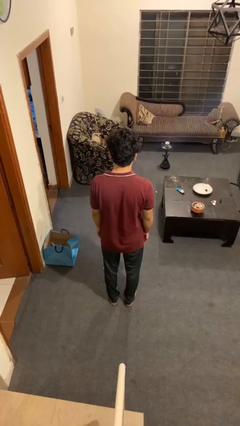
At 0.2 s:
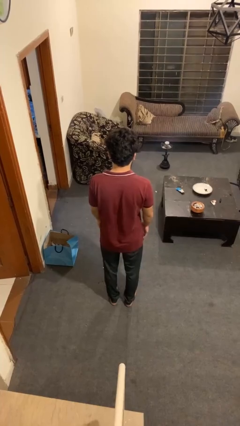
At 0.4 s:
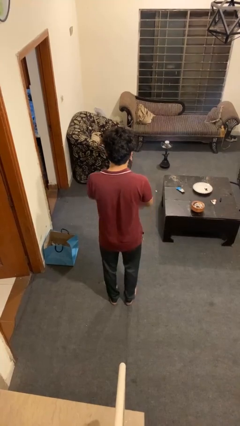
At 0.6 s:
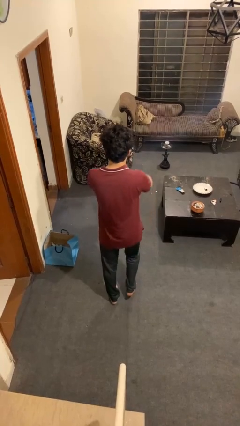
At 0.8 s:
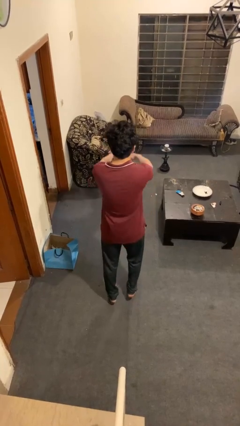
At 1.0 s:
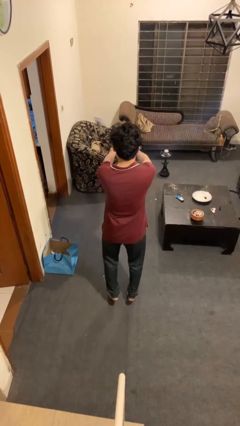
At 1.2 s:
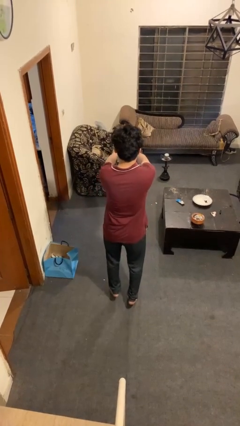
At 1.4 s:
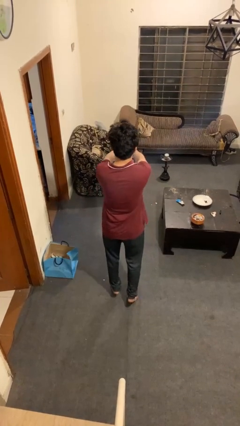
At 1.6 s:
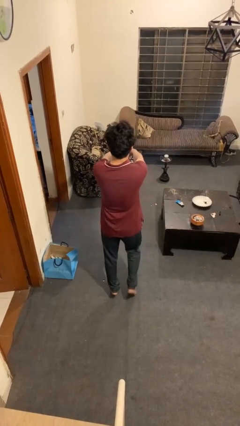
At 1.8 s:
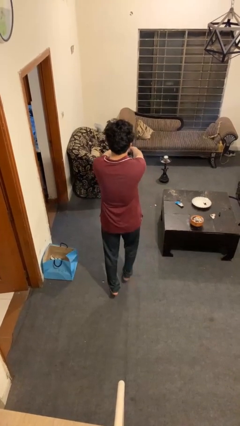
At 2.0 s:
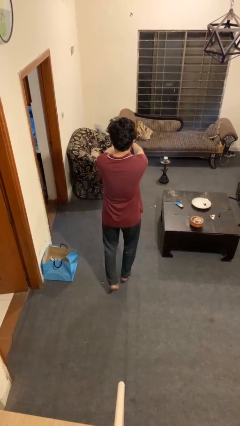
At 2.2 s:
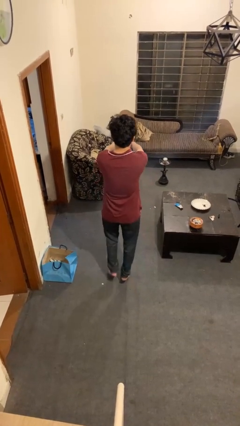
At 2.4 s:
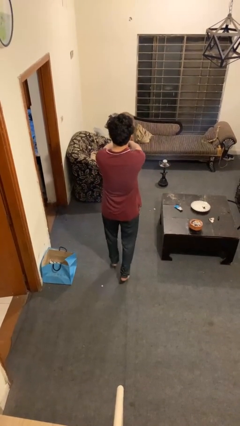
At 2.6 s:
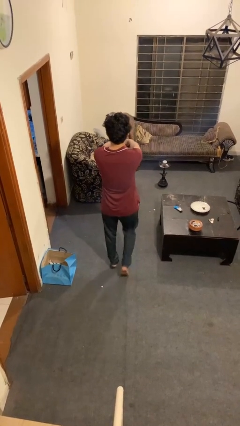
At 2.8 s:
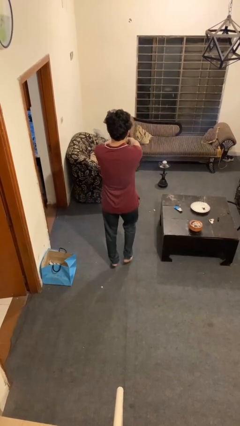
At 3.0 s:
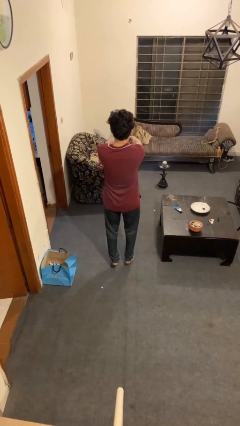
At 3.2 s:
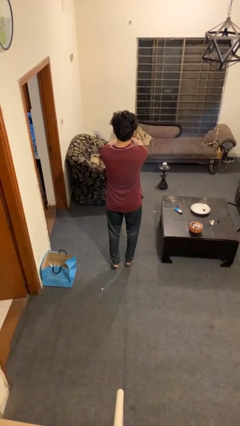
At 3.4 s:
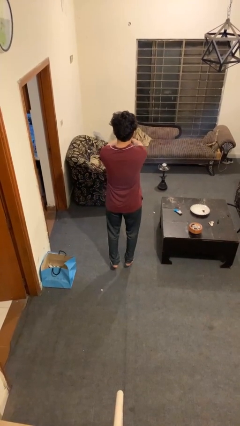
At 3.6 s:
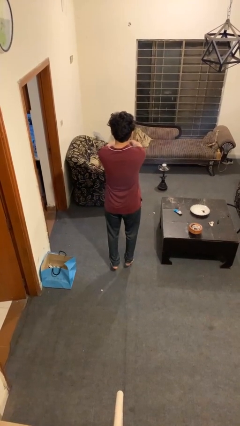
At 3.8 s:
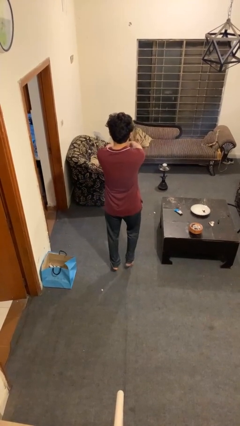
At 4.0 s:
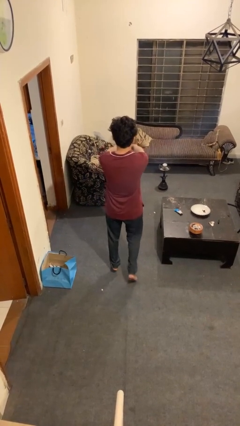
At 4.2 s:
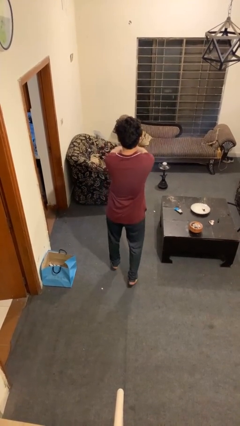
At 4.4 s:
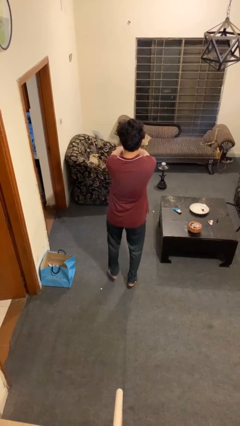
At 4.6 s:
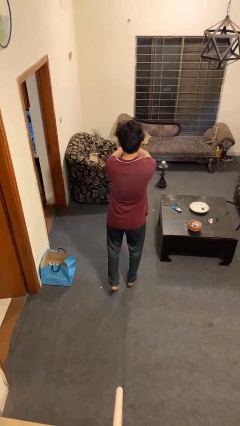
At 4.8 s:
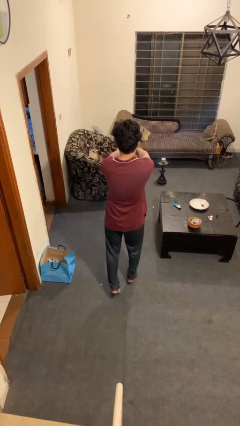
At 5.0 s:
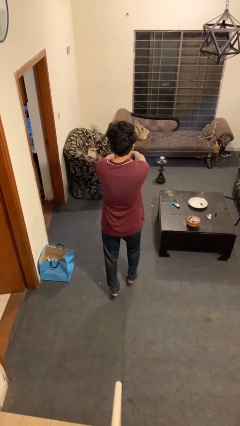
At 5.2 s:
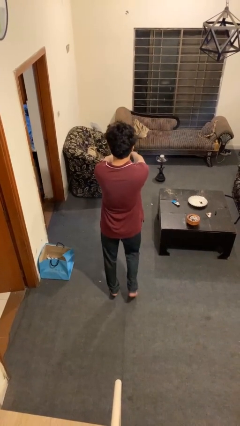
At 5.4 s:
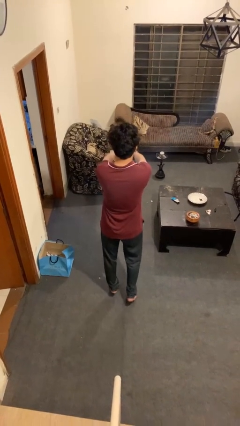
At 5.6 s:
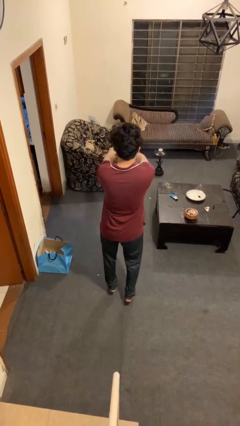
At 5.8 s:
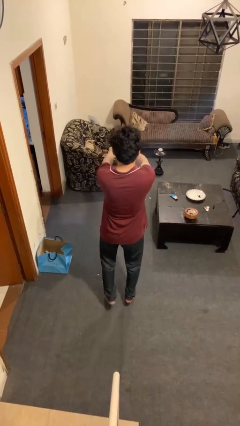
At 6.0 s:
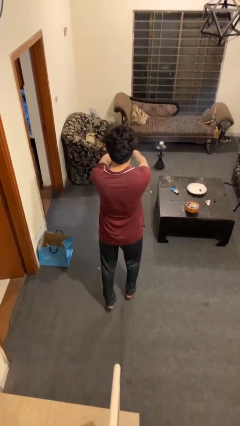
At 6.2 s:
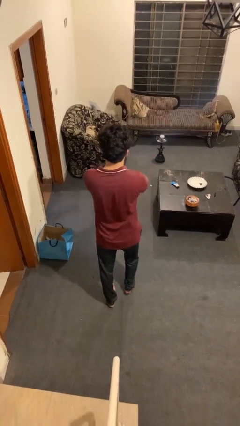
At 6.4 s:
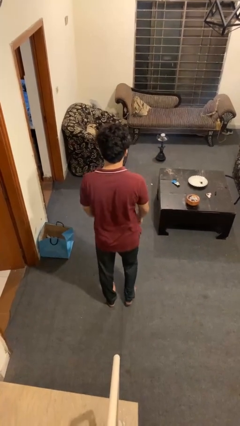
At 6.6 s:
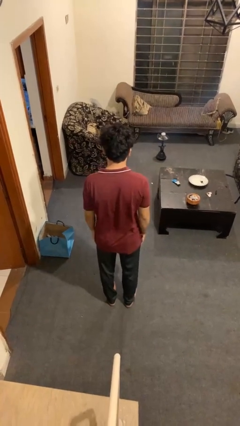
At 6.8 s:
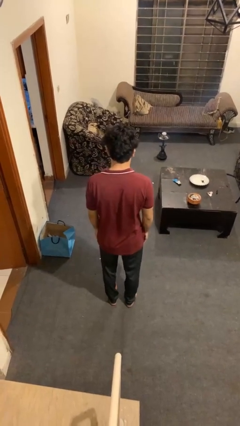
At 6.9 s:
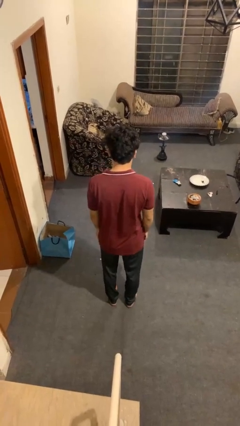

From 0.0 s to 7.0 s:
person walks tiptoe

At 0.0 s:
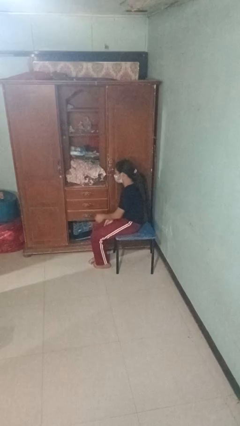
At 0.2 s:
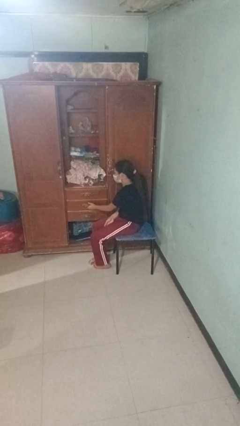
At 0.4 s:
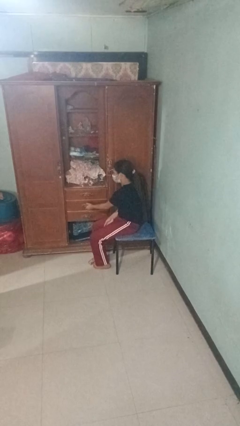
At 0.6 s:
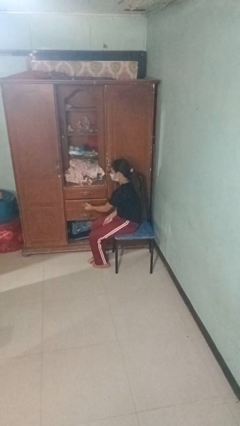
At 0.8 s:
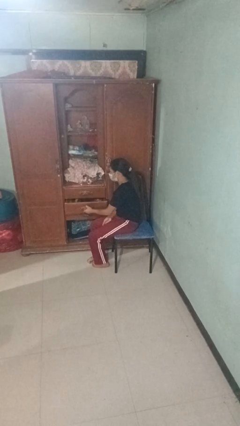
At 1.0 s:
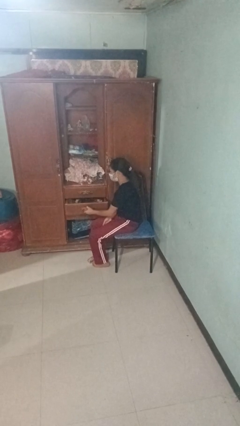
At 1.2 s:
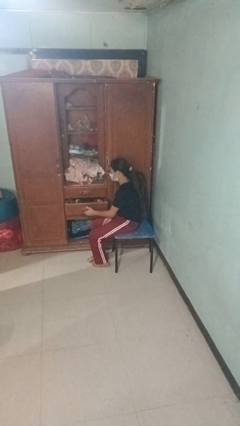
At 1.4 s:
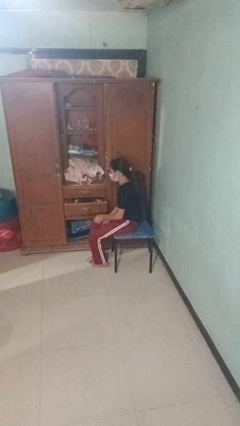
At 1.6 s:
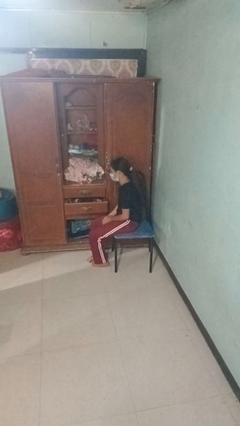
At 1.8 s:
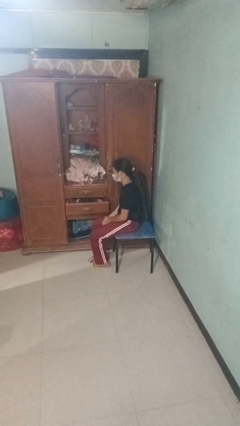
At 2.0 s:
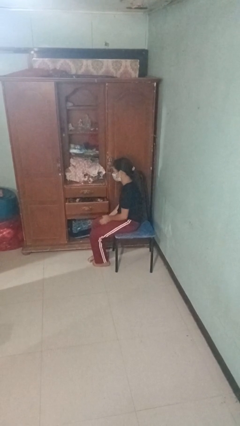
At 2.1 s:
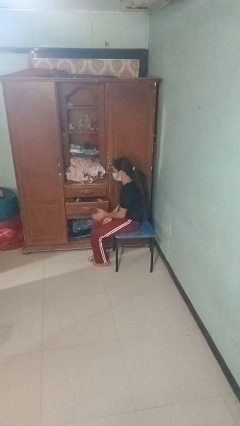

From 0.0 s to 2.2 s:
person opens dresser drawer

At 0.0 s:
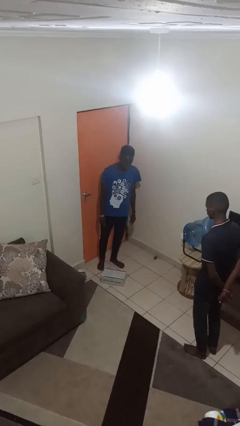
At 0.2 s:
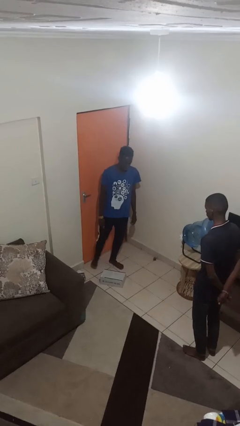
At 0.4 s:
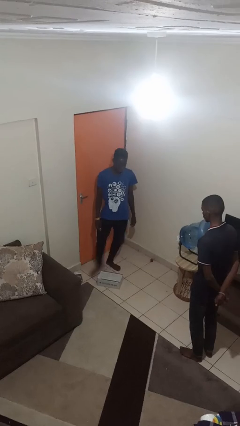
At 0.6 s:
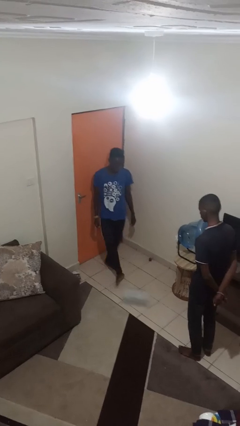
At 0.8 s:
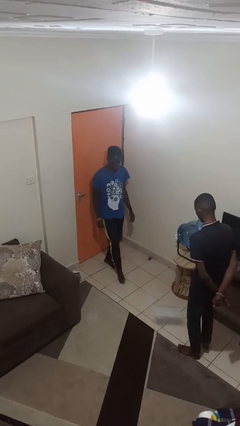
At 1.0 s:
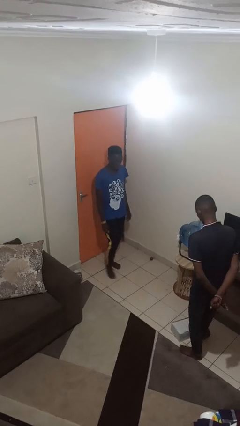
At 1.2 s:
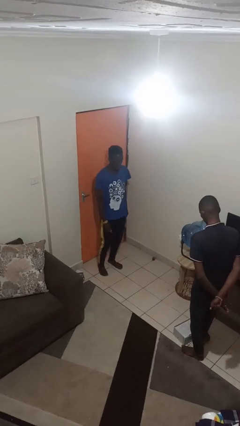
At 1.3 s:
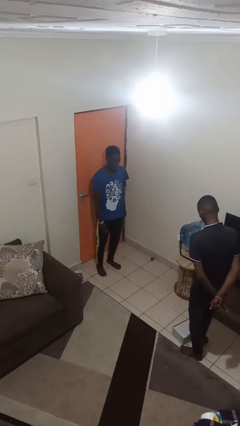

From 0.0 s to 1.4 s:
person kicks object to person

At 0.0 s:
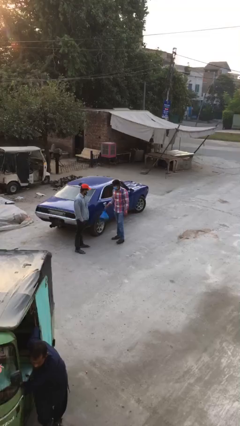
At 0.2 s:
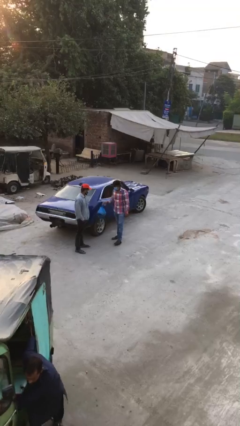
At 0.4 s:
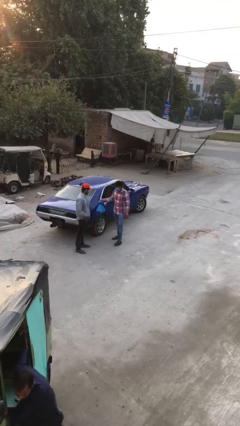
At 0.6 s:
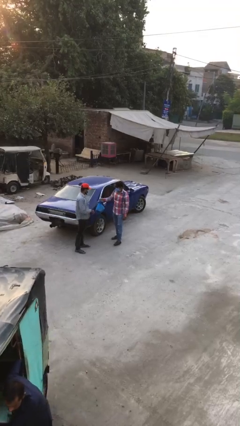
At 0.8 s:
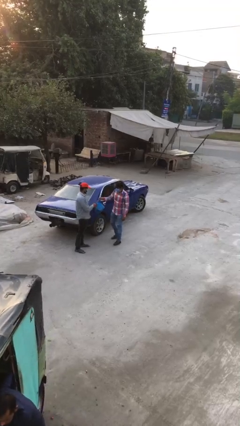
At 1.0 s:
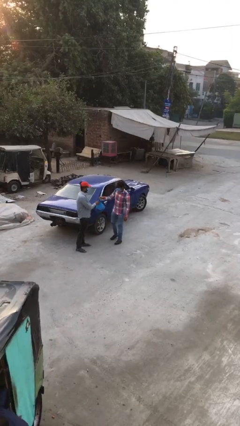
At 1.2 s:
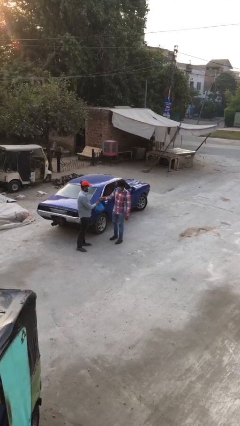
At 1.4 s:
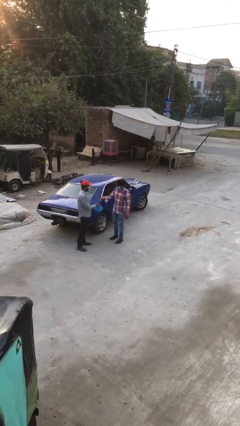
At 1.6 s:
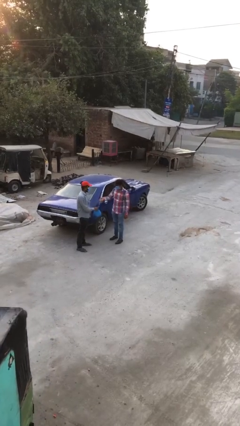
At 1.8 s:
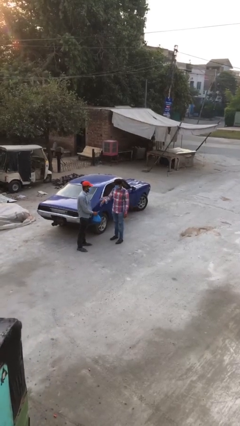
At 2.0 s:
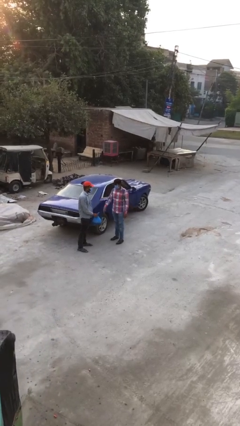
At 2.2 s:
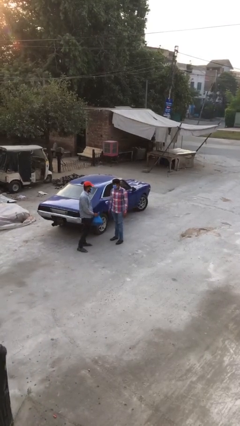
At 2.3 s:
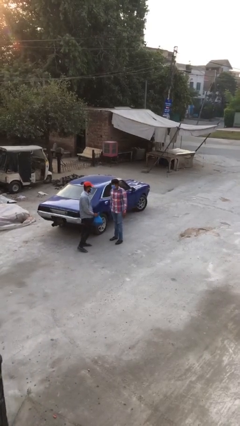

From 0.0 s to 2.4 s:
person transfers object to person

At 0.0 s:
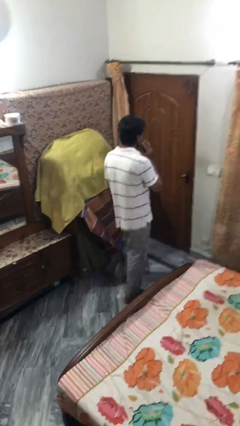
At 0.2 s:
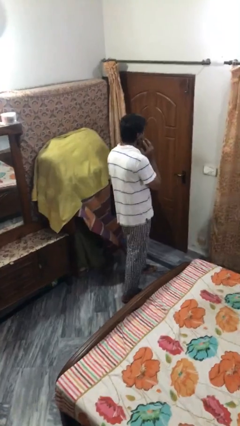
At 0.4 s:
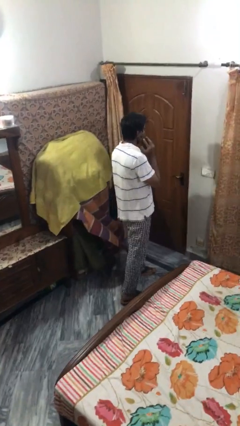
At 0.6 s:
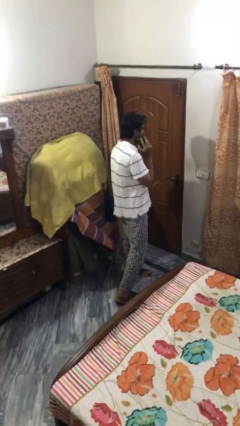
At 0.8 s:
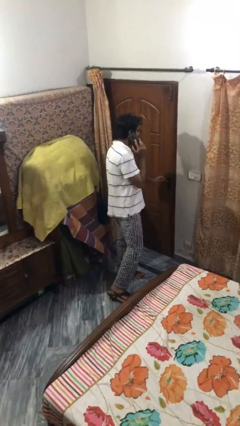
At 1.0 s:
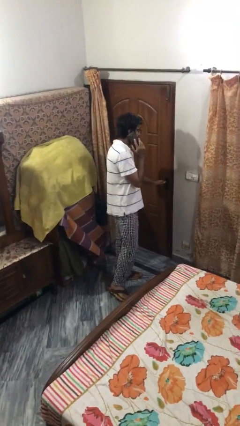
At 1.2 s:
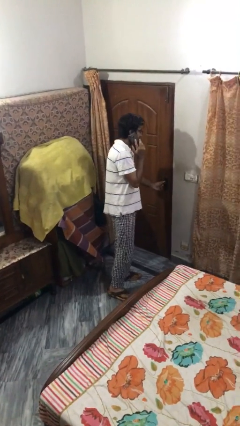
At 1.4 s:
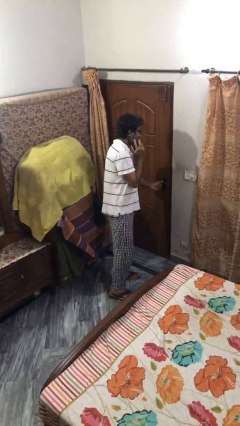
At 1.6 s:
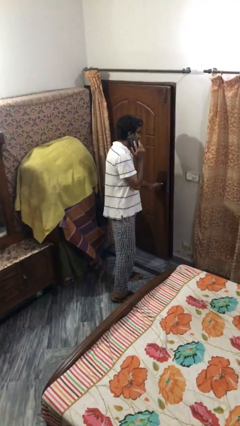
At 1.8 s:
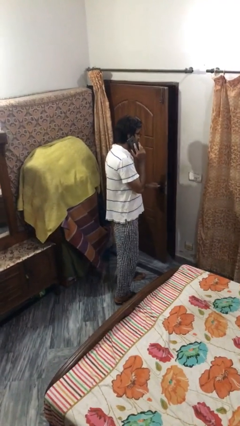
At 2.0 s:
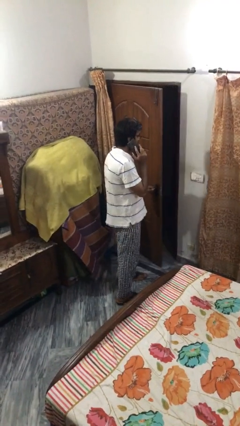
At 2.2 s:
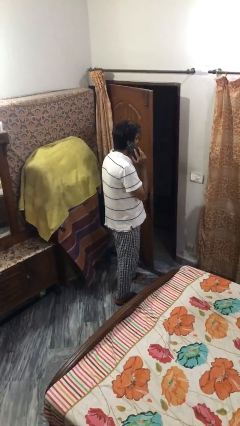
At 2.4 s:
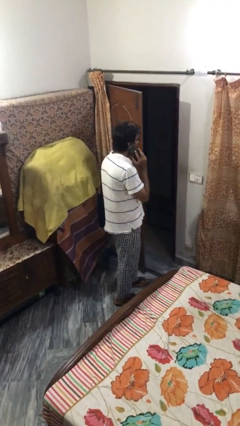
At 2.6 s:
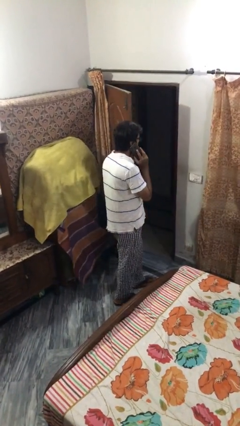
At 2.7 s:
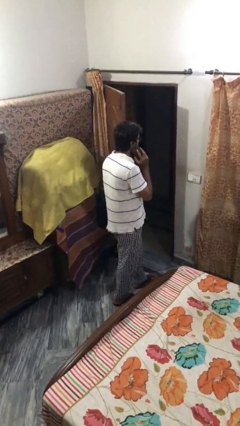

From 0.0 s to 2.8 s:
person opens facility door

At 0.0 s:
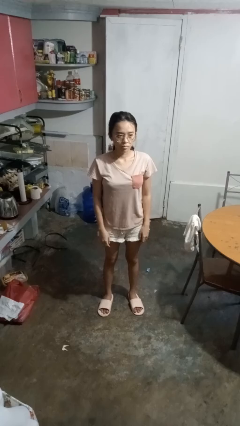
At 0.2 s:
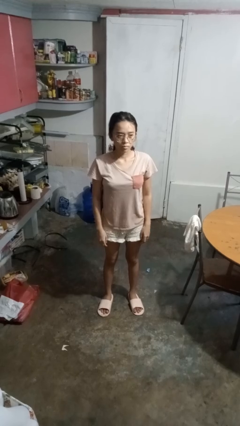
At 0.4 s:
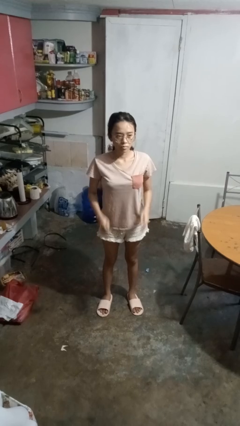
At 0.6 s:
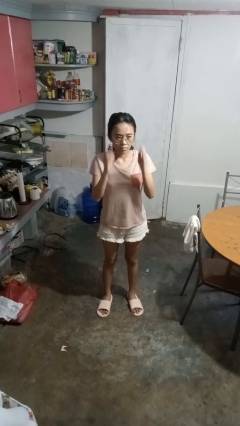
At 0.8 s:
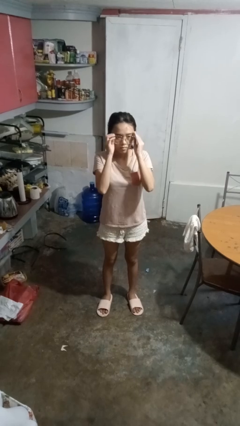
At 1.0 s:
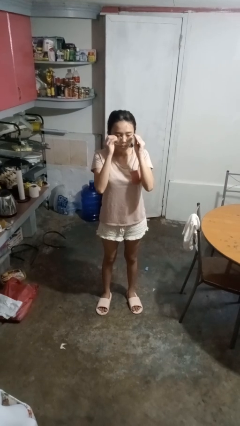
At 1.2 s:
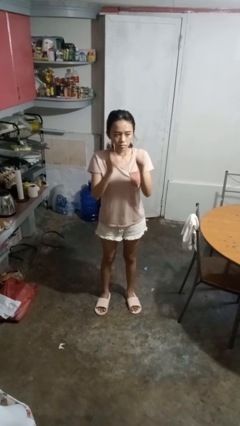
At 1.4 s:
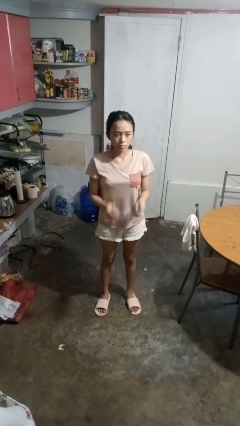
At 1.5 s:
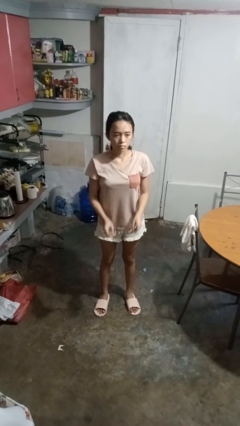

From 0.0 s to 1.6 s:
person takes off glasses
